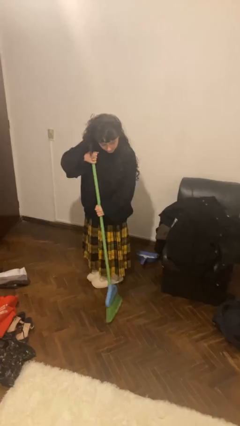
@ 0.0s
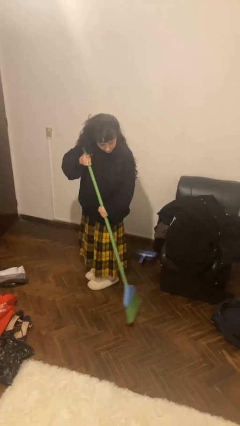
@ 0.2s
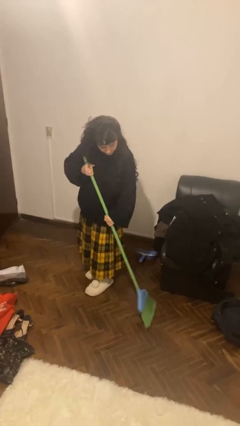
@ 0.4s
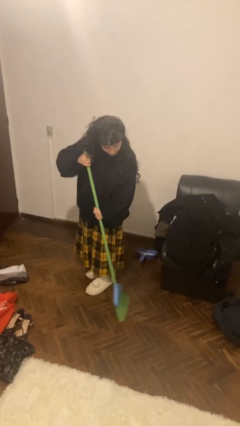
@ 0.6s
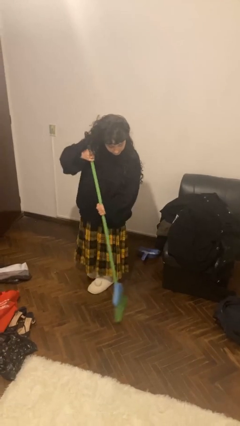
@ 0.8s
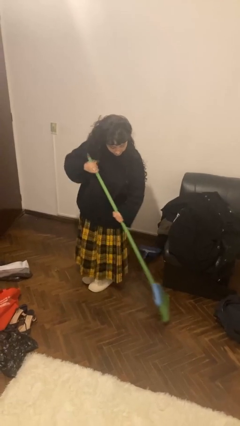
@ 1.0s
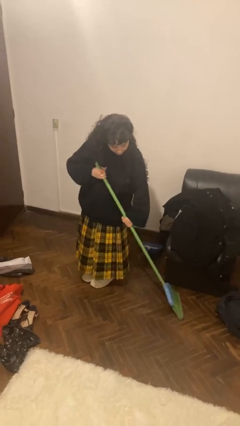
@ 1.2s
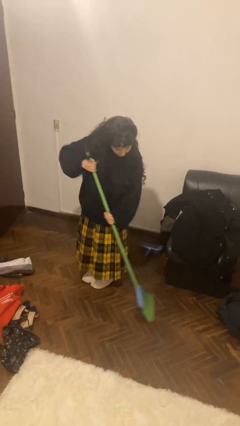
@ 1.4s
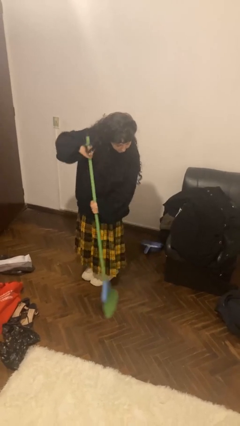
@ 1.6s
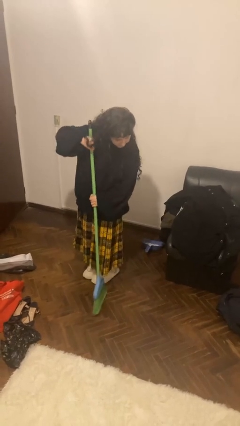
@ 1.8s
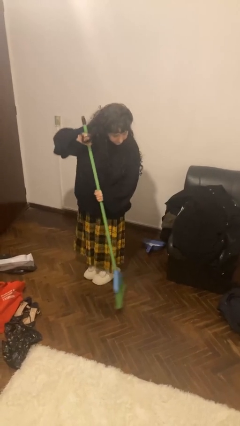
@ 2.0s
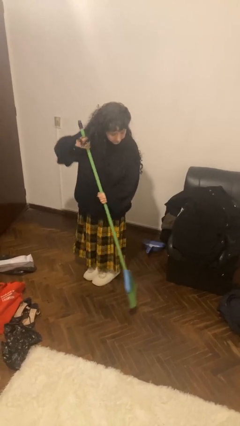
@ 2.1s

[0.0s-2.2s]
person sweeps floor

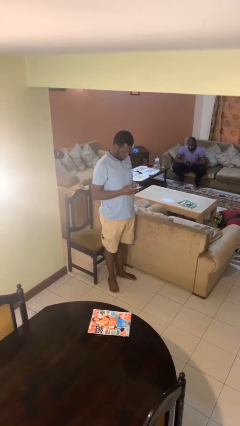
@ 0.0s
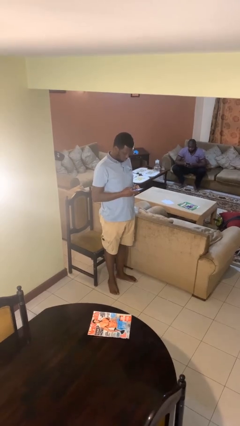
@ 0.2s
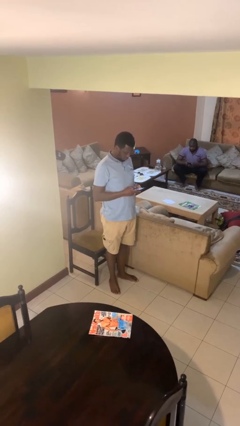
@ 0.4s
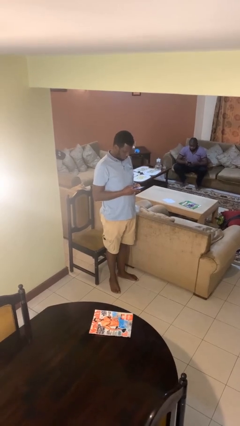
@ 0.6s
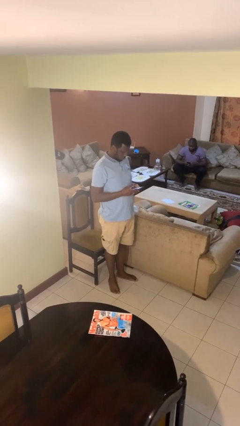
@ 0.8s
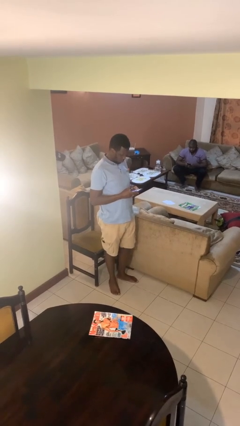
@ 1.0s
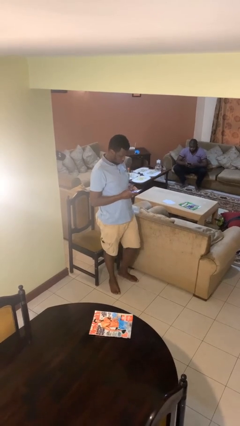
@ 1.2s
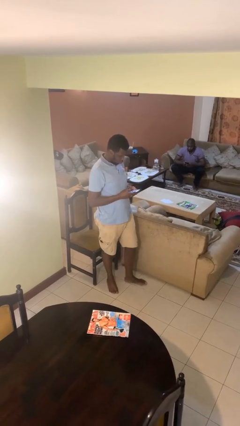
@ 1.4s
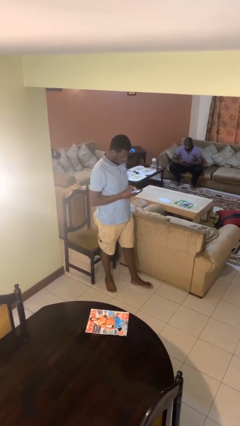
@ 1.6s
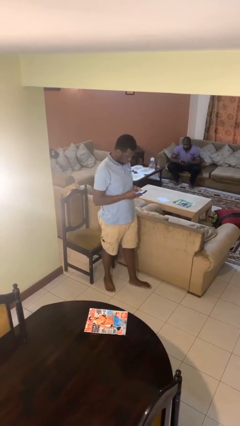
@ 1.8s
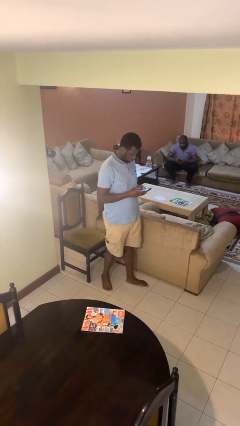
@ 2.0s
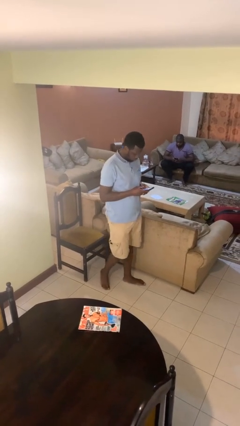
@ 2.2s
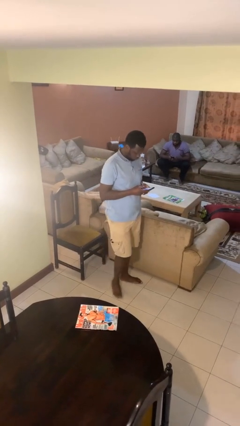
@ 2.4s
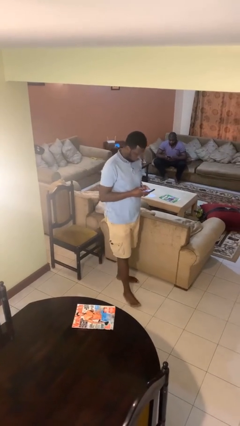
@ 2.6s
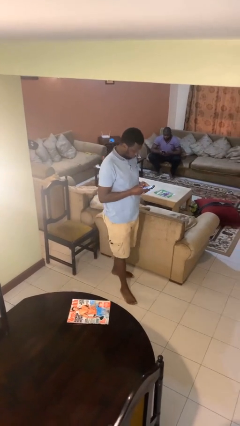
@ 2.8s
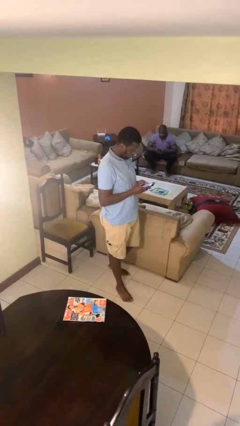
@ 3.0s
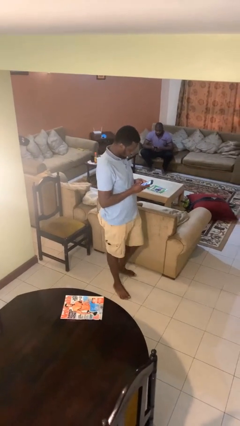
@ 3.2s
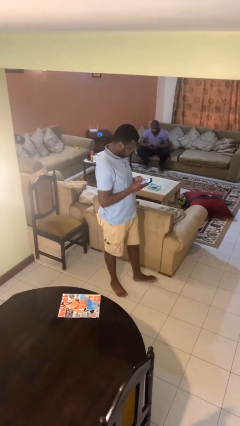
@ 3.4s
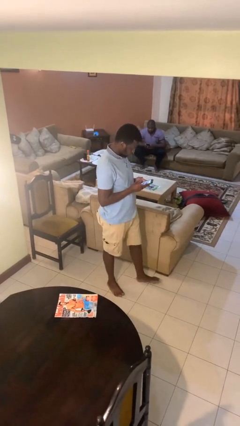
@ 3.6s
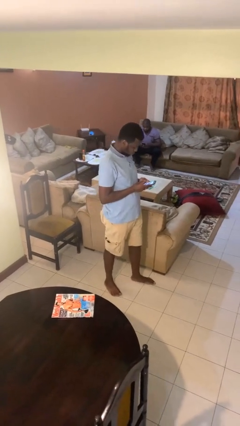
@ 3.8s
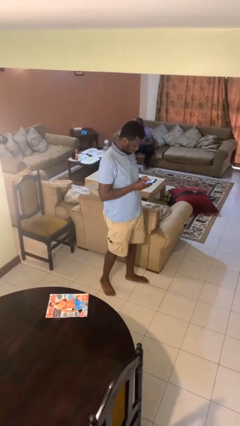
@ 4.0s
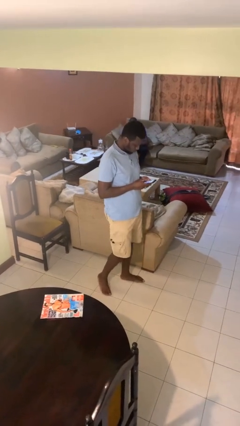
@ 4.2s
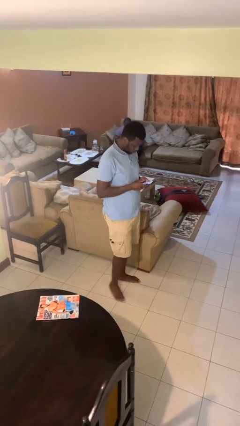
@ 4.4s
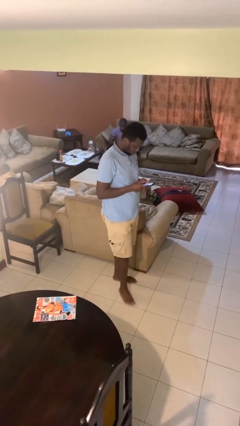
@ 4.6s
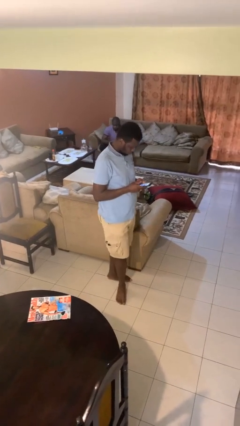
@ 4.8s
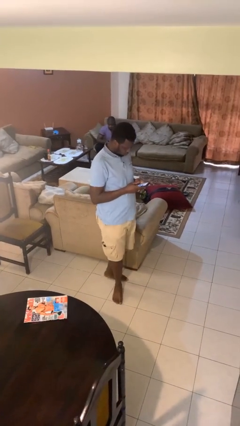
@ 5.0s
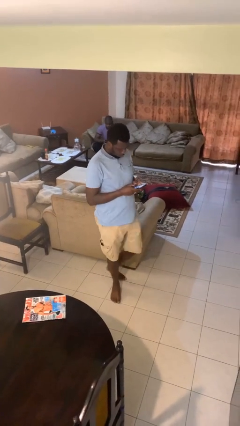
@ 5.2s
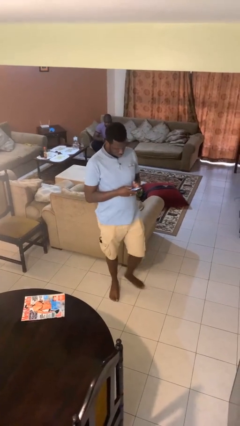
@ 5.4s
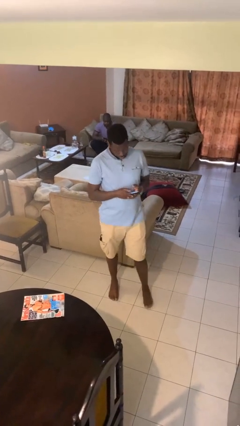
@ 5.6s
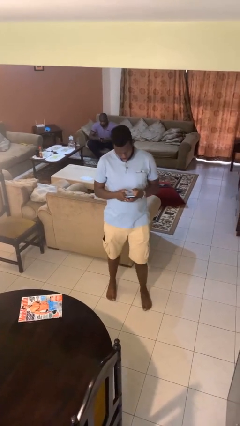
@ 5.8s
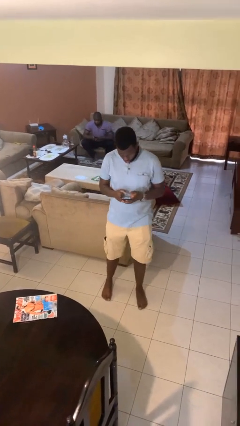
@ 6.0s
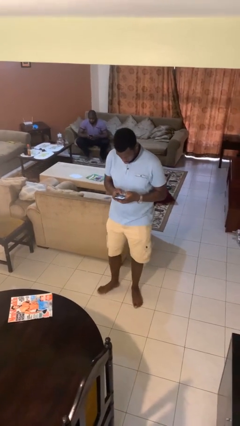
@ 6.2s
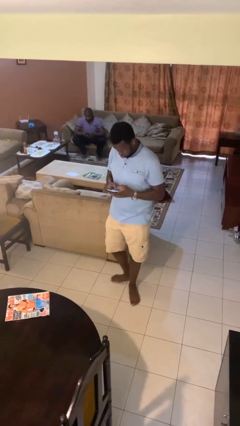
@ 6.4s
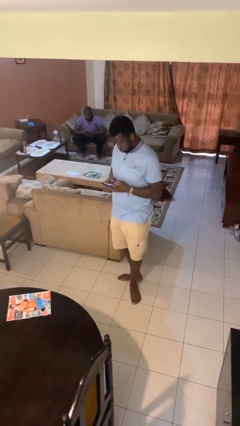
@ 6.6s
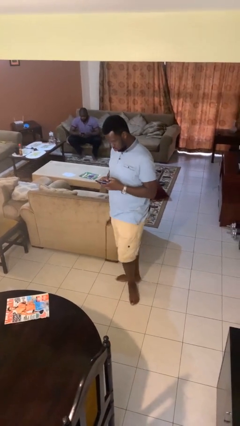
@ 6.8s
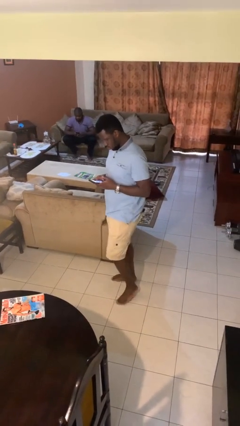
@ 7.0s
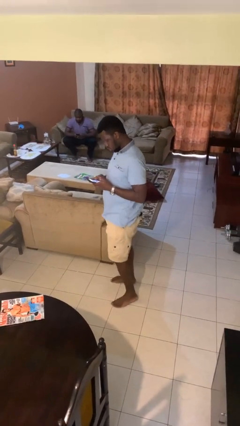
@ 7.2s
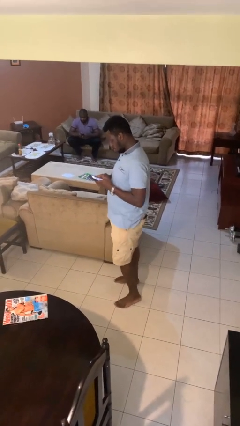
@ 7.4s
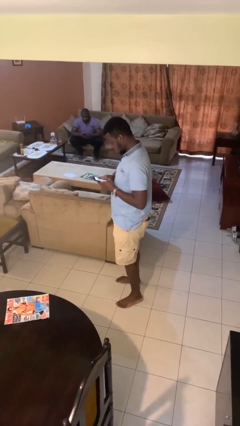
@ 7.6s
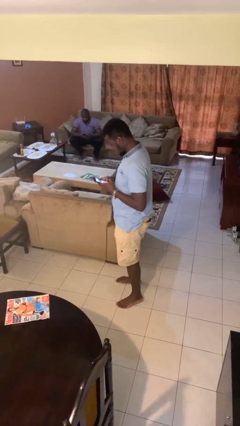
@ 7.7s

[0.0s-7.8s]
person texts on phone

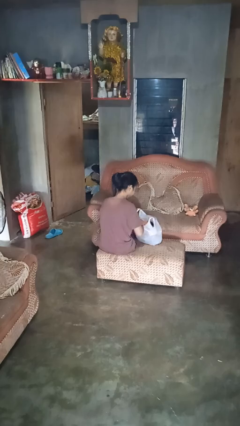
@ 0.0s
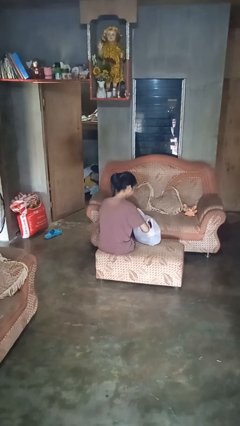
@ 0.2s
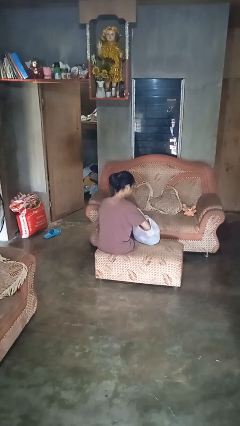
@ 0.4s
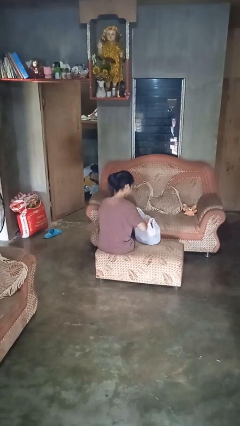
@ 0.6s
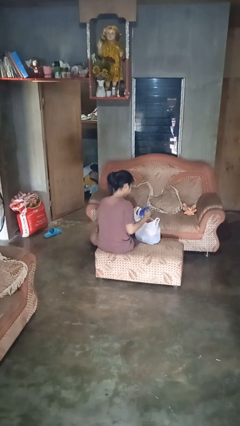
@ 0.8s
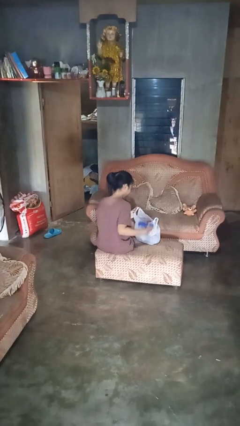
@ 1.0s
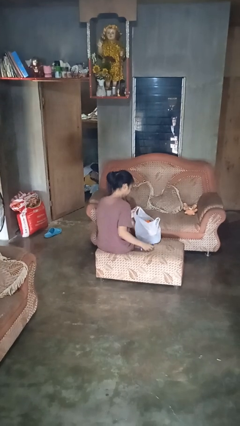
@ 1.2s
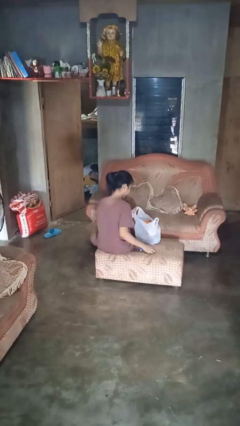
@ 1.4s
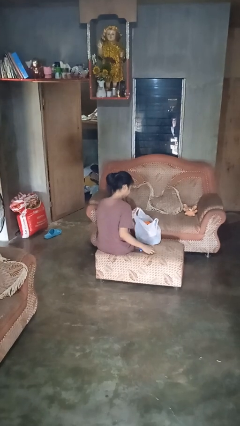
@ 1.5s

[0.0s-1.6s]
person takes object from bag

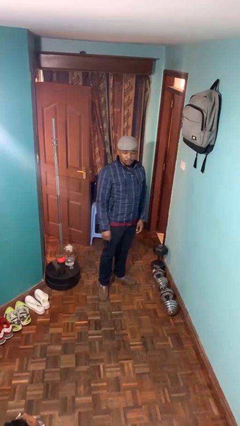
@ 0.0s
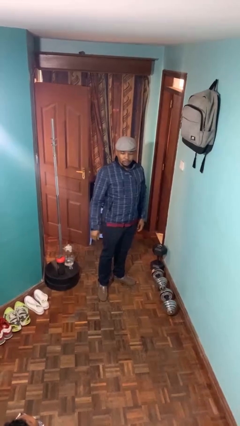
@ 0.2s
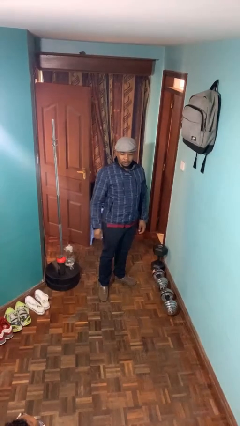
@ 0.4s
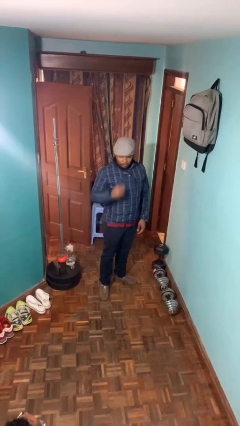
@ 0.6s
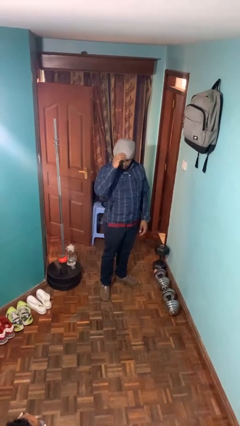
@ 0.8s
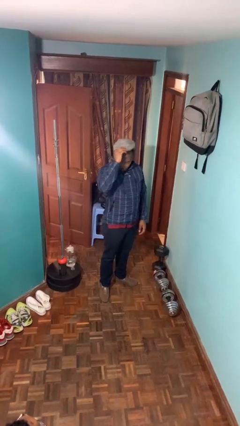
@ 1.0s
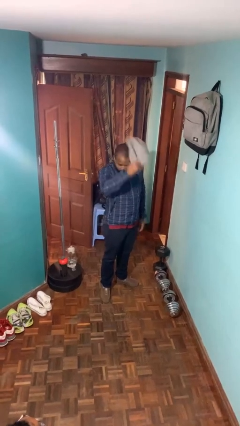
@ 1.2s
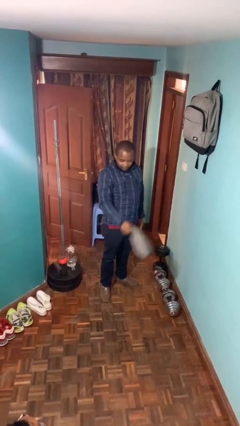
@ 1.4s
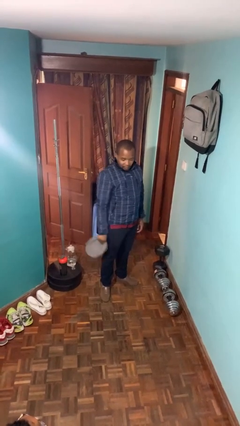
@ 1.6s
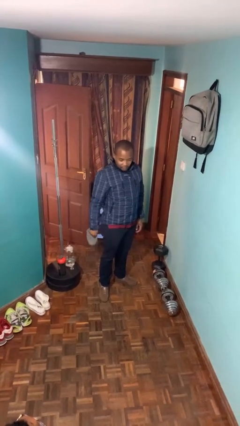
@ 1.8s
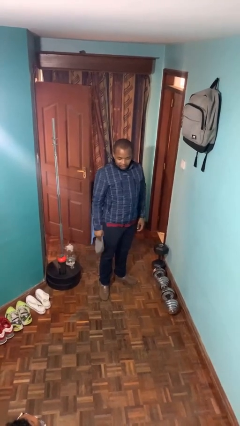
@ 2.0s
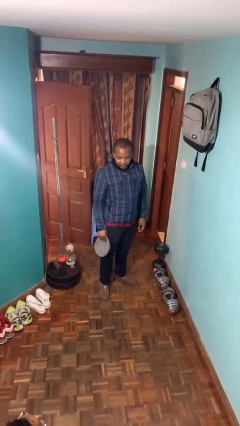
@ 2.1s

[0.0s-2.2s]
person takes off hat

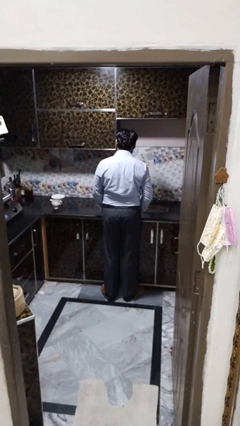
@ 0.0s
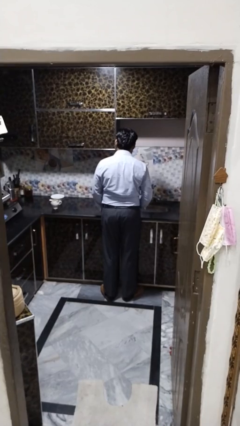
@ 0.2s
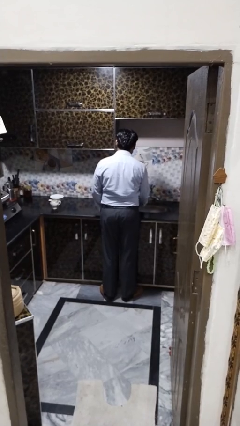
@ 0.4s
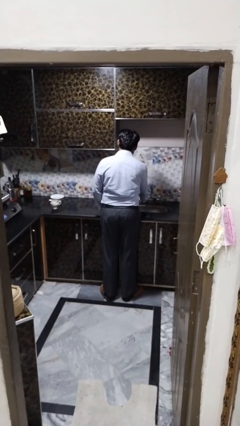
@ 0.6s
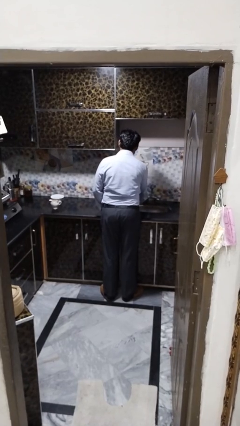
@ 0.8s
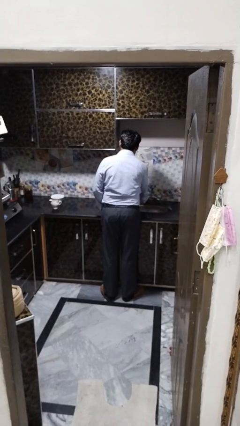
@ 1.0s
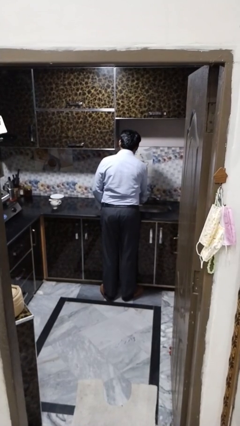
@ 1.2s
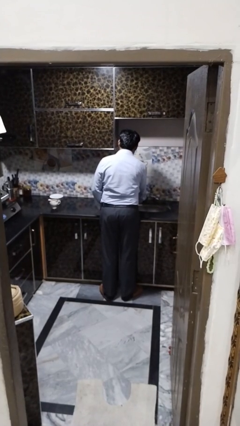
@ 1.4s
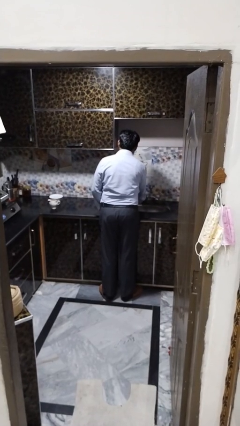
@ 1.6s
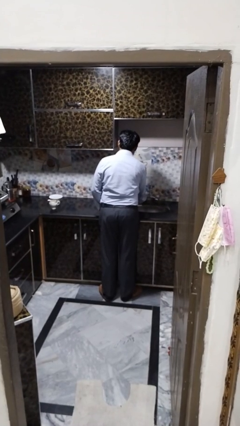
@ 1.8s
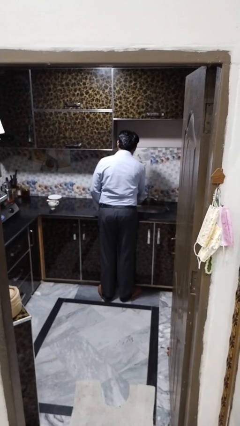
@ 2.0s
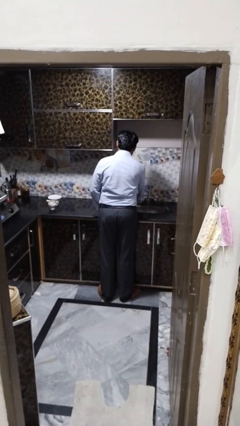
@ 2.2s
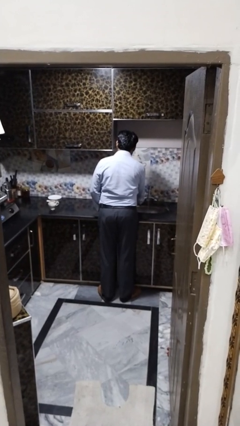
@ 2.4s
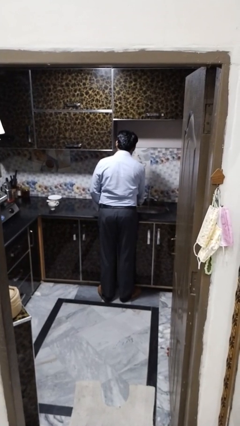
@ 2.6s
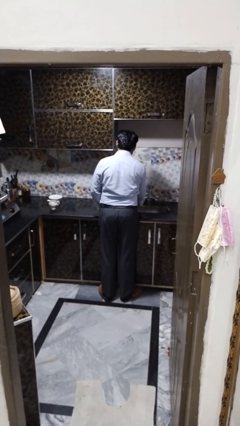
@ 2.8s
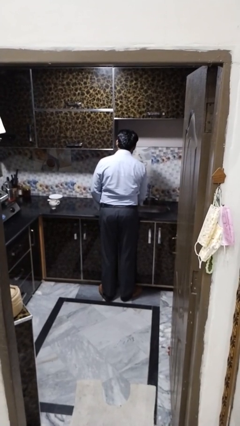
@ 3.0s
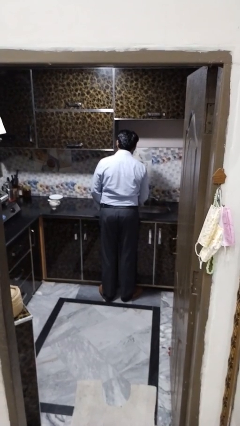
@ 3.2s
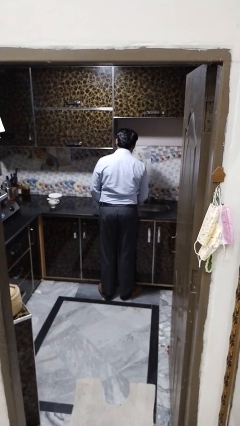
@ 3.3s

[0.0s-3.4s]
person turns on faucet

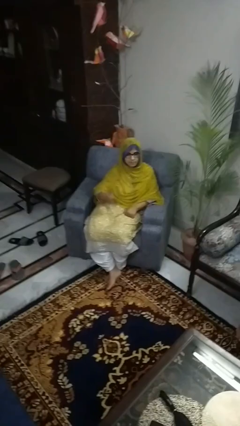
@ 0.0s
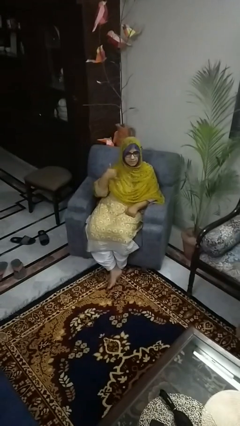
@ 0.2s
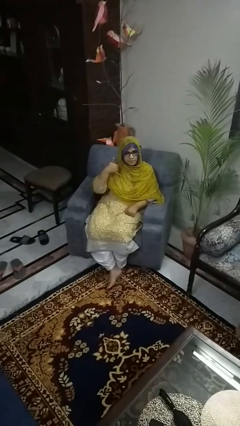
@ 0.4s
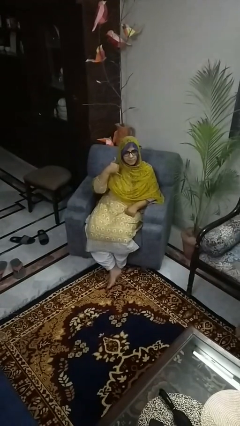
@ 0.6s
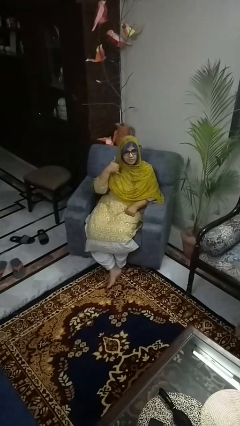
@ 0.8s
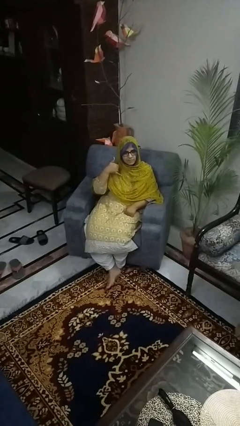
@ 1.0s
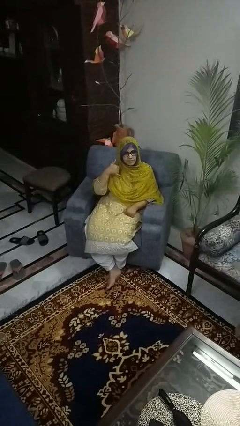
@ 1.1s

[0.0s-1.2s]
person gestures call me
